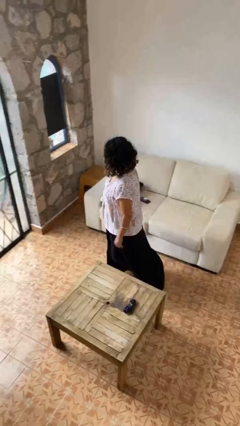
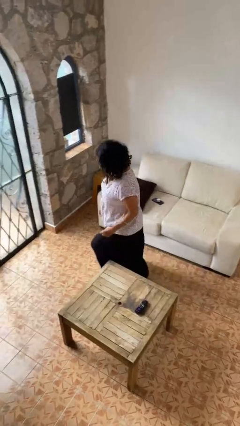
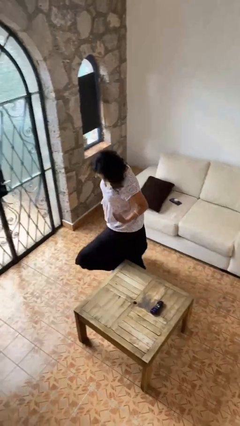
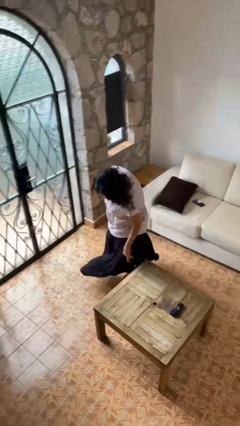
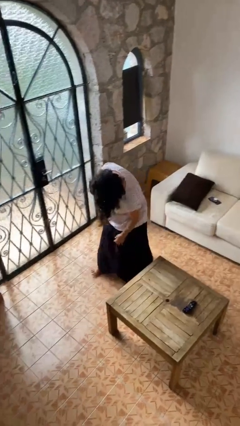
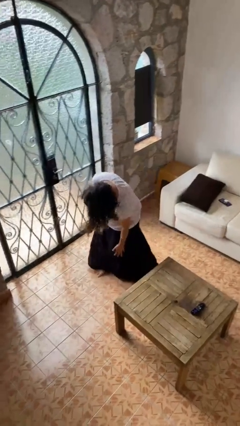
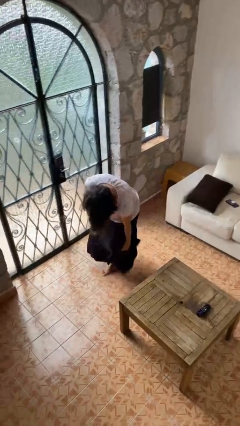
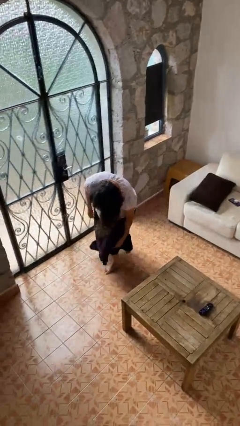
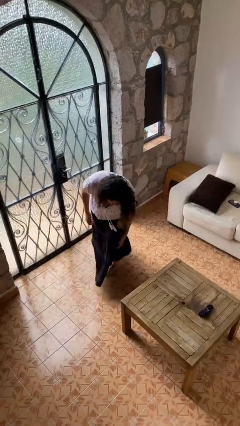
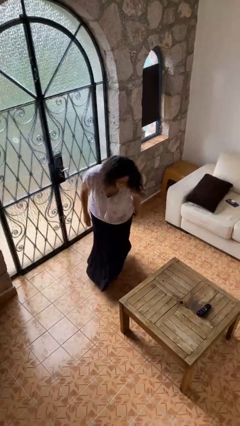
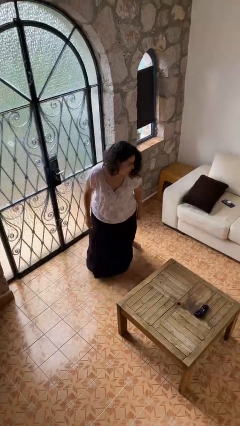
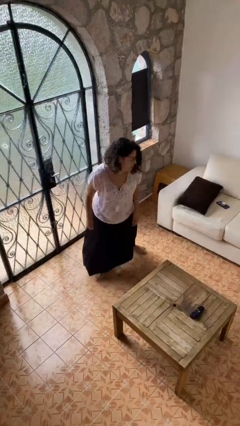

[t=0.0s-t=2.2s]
person bumps into table

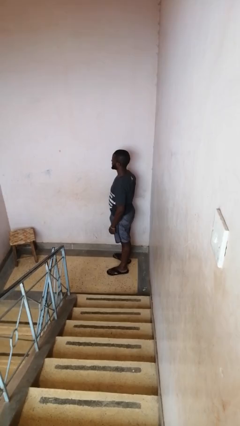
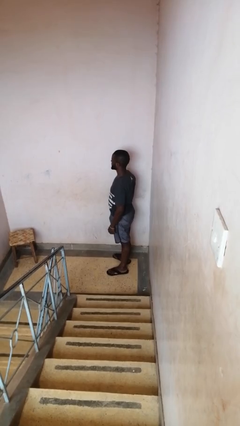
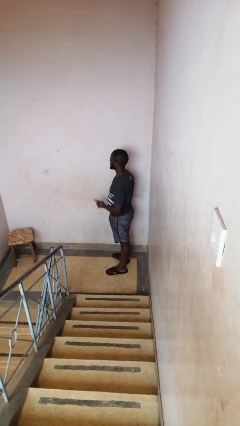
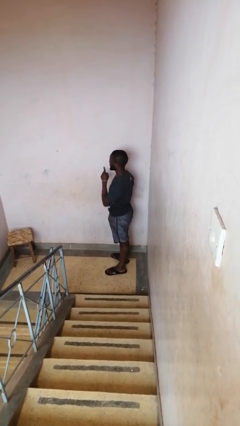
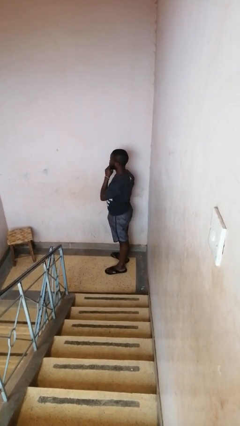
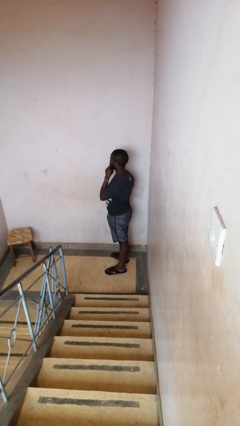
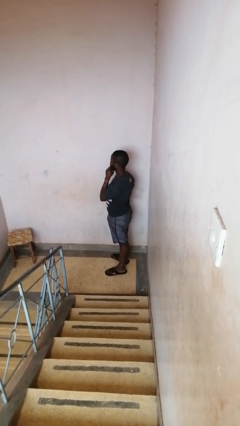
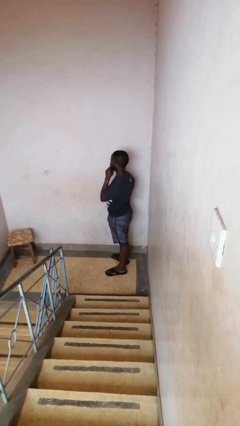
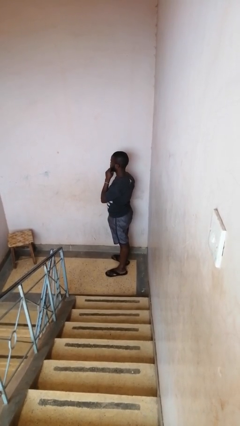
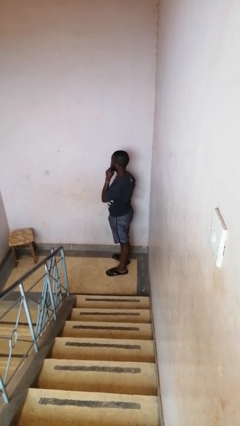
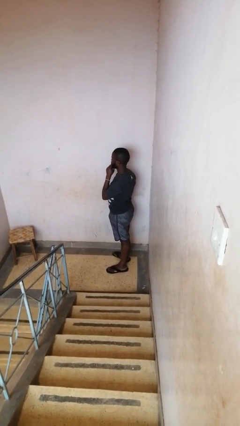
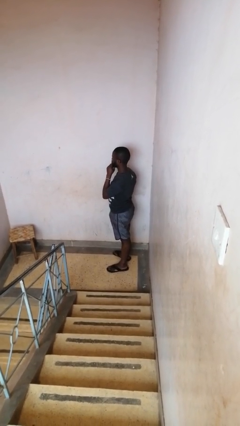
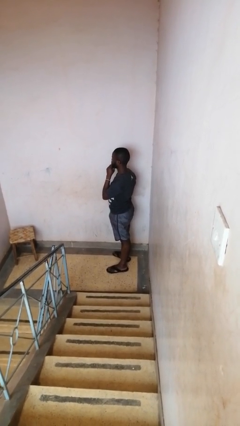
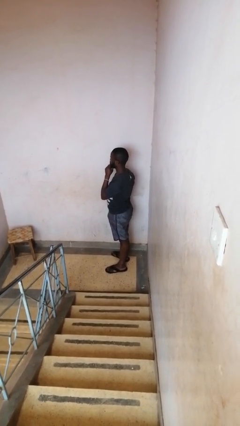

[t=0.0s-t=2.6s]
person gestures be quiet

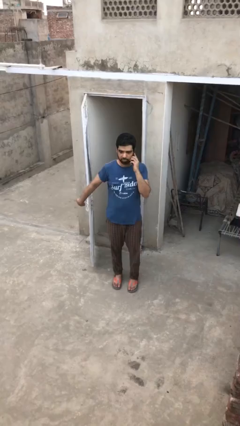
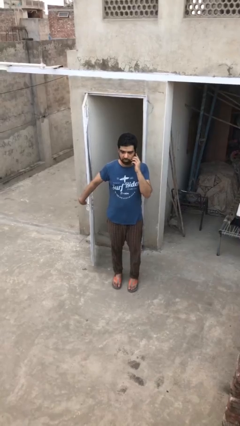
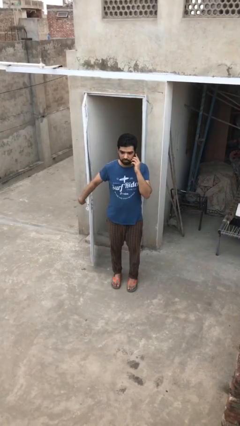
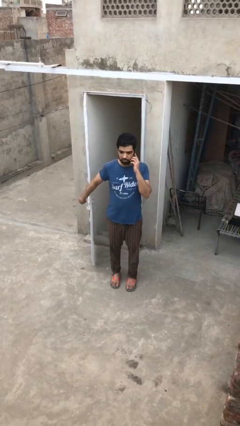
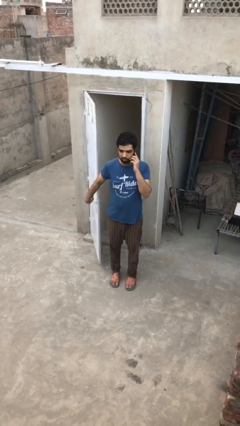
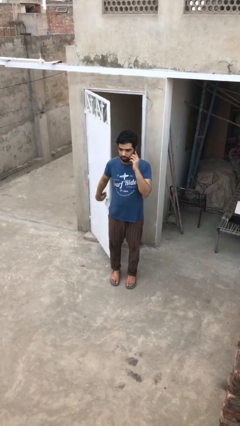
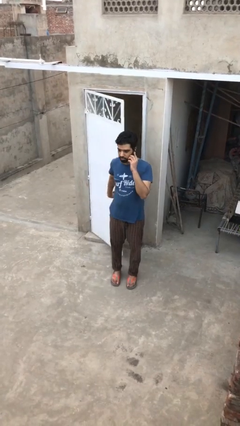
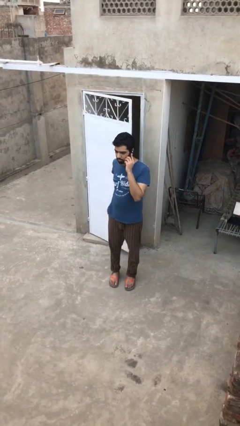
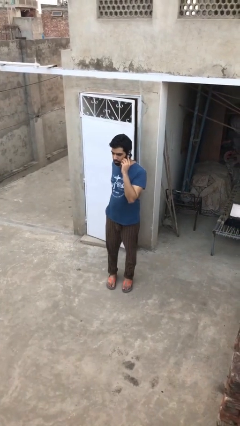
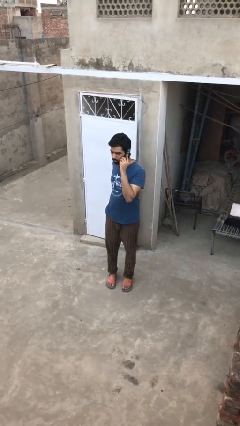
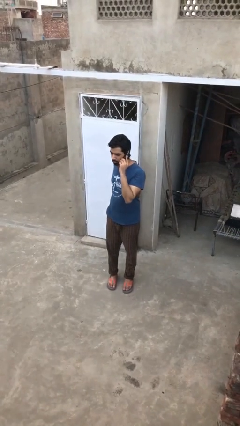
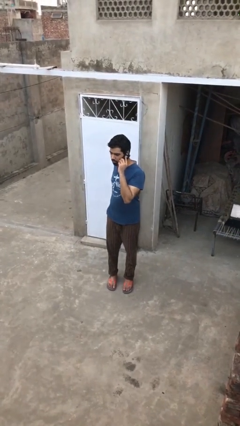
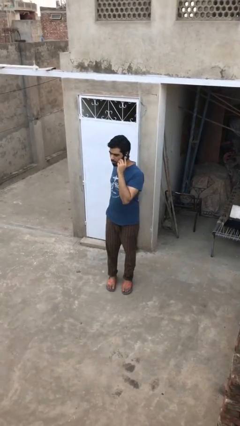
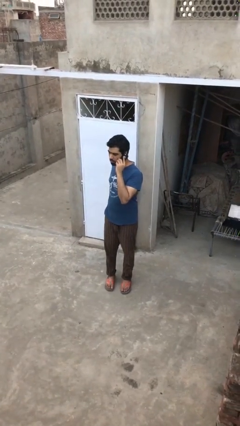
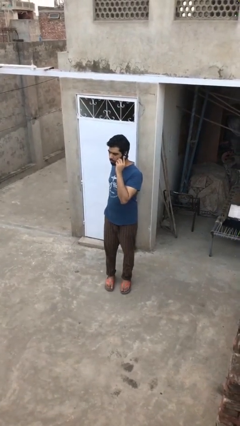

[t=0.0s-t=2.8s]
person closes facility door

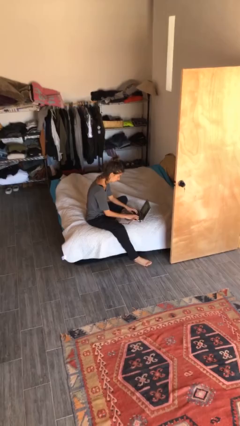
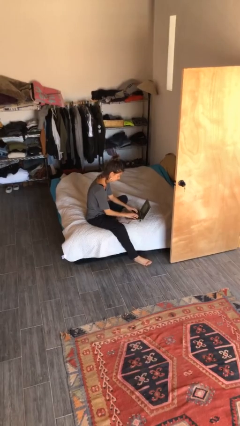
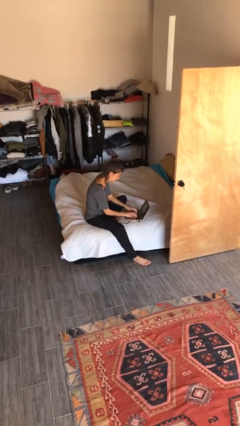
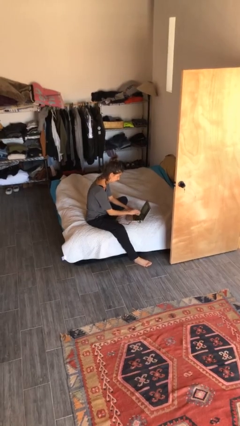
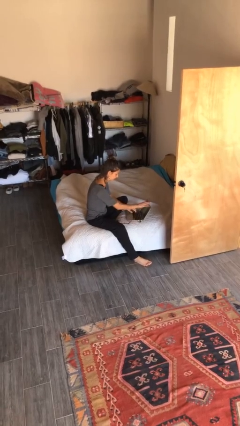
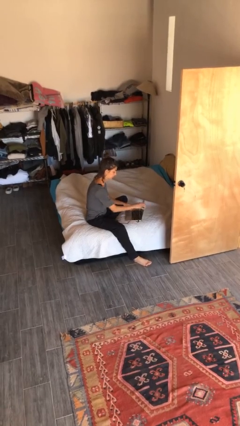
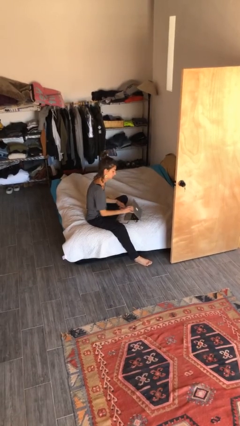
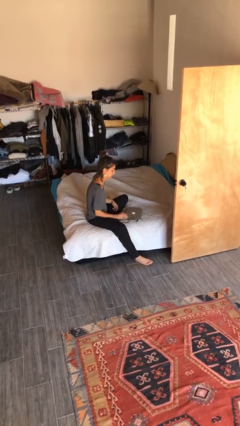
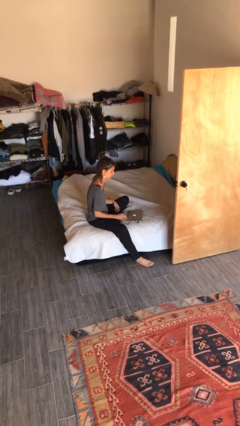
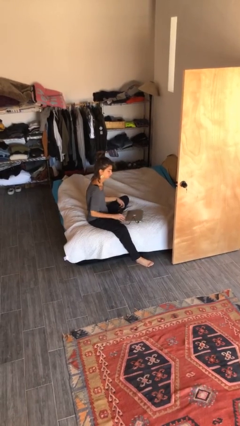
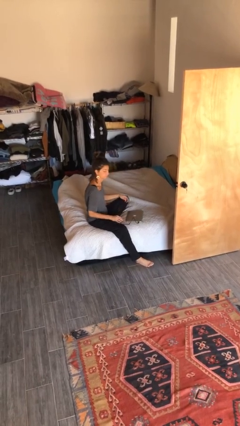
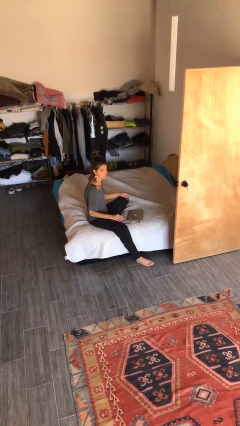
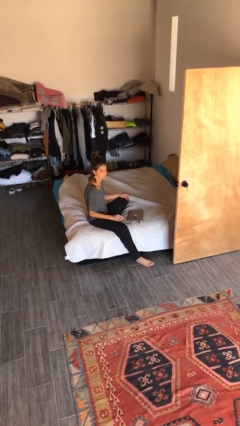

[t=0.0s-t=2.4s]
person interacts with laptop

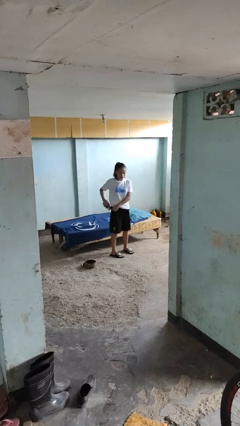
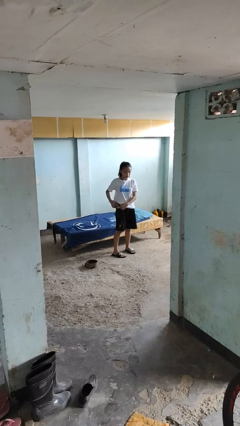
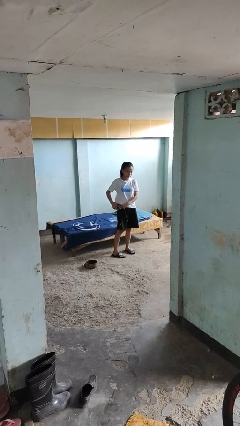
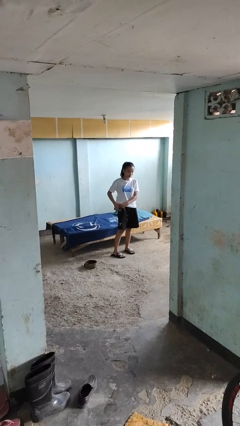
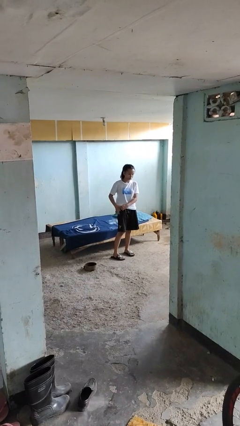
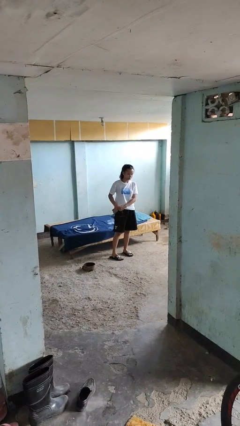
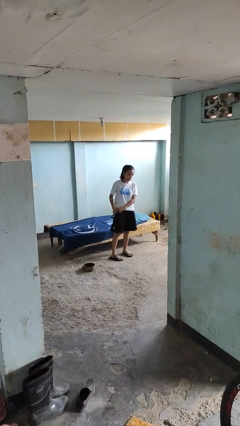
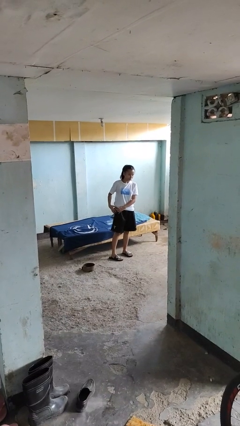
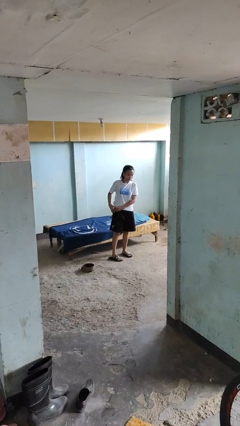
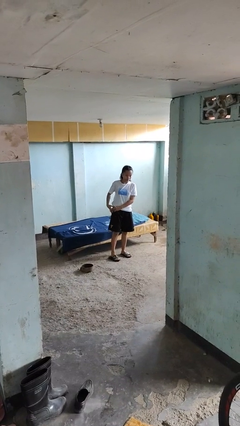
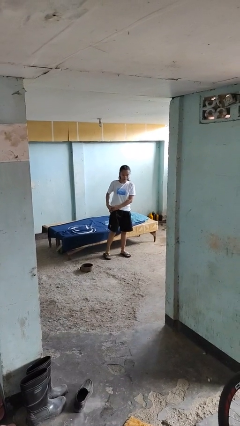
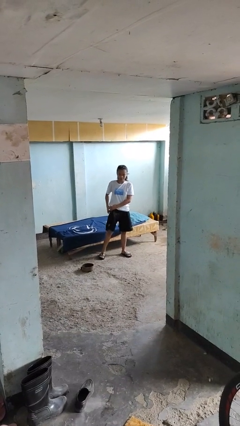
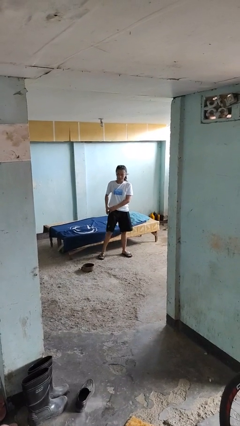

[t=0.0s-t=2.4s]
person puts phone into pocket

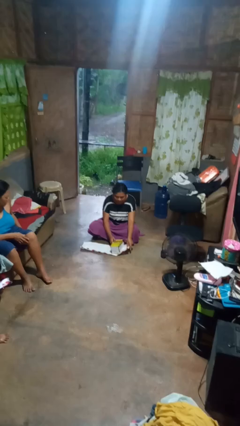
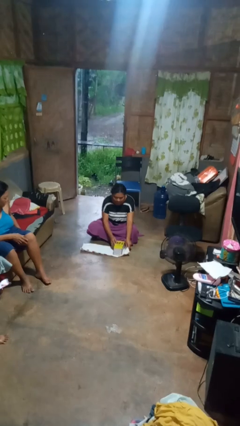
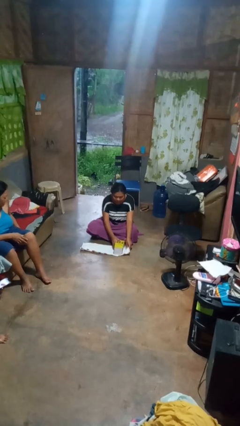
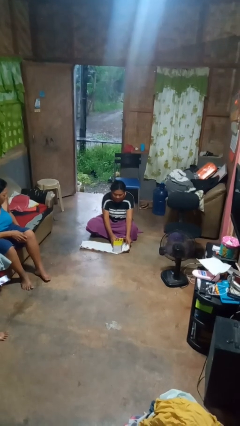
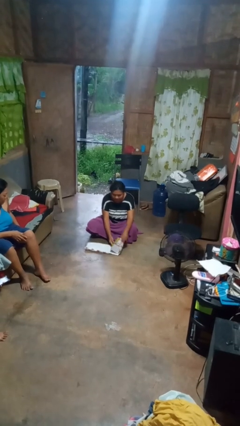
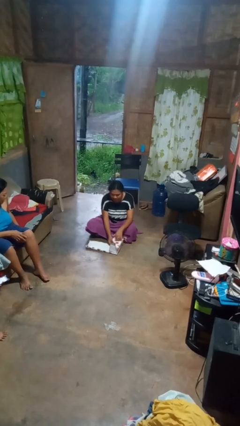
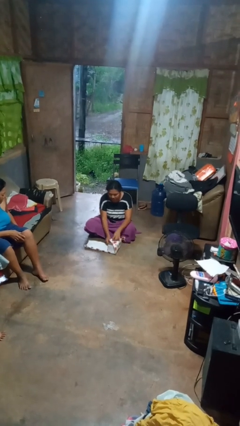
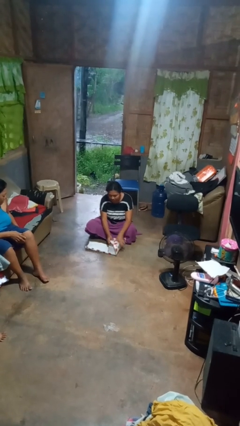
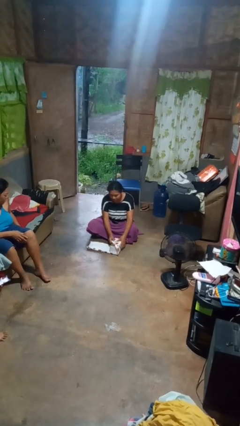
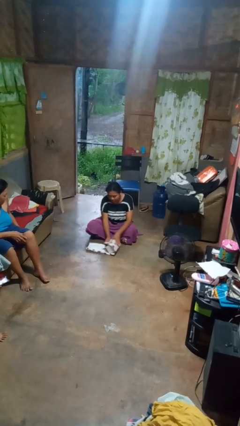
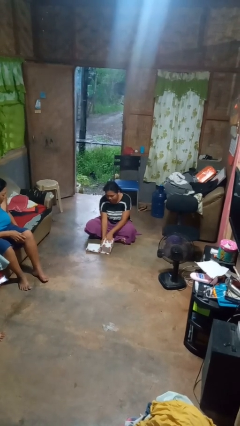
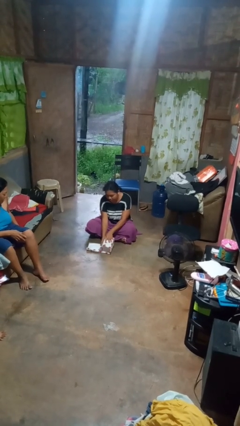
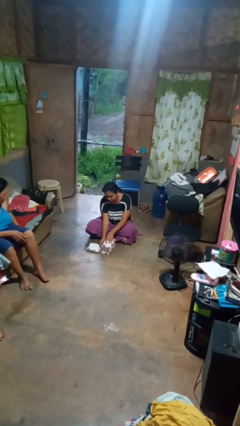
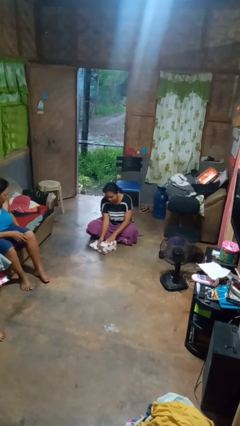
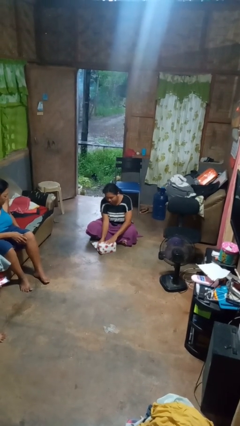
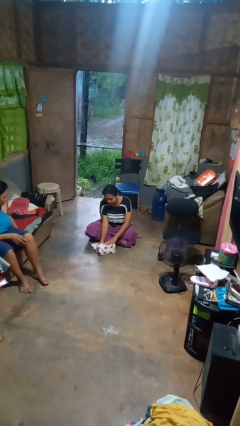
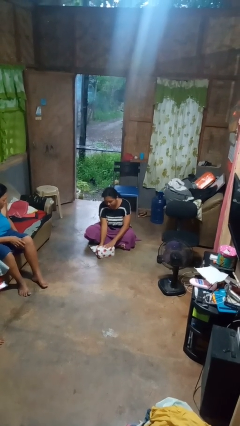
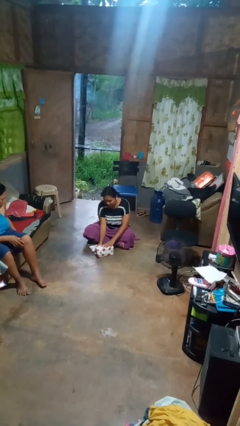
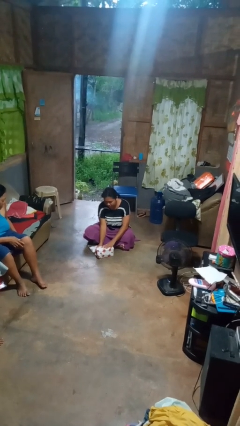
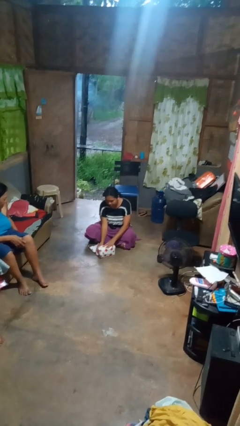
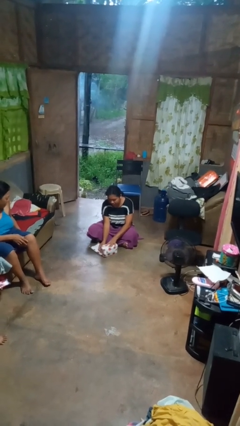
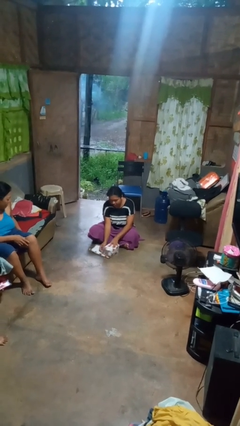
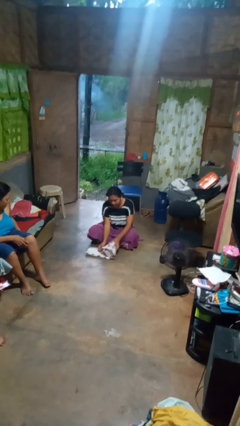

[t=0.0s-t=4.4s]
person wraps box

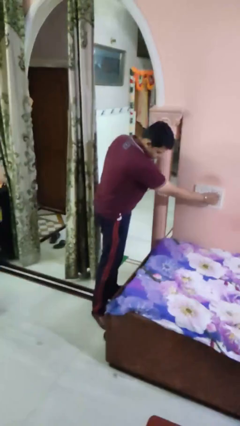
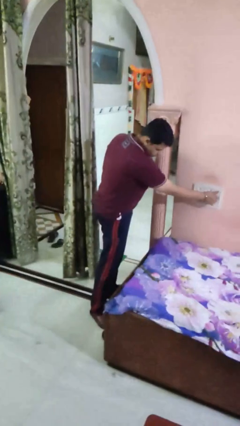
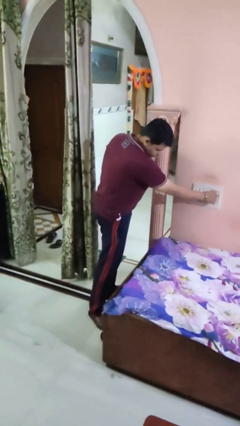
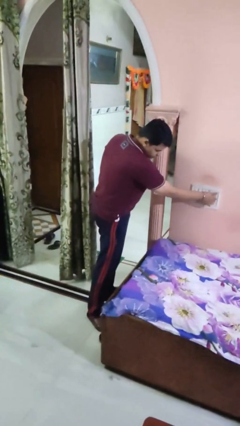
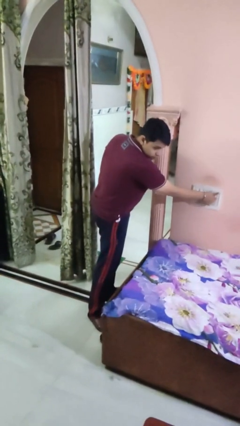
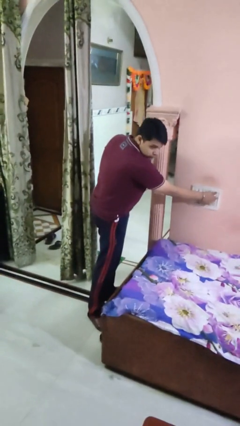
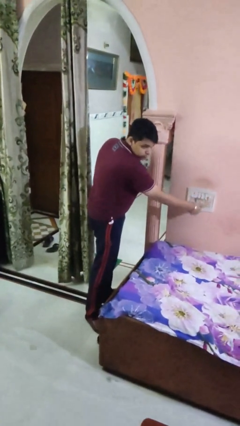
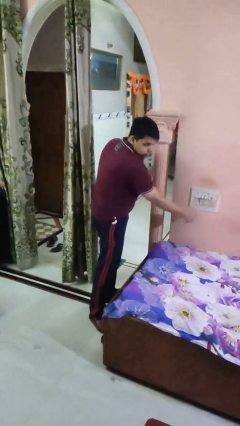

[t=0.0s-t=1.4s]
person adjusts thermostat
